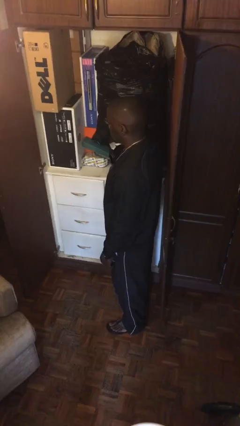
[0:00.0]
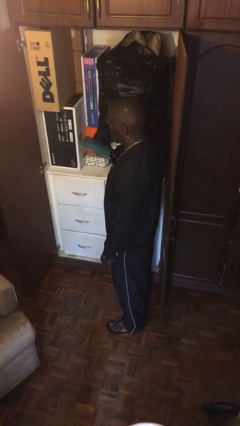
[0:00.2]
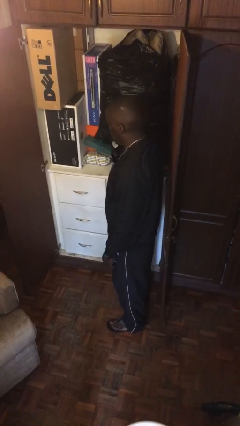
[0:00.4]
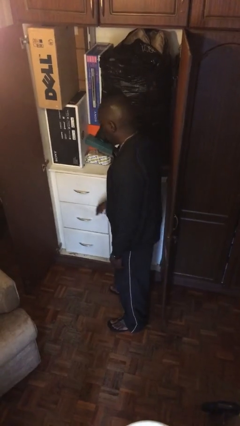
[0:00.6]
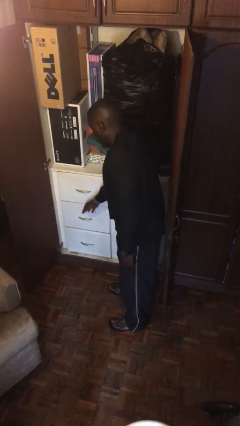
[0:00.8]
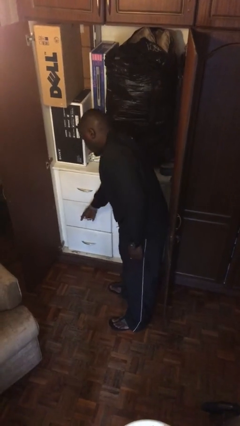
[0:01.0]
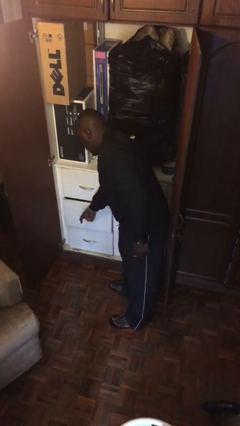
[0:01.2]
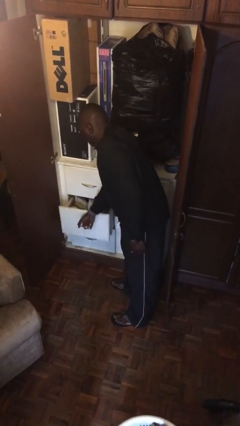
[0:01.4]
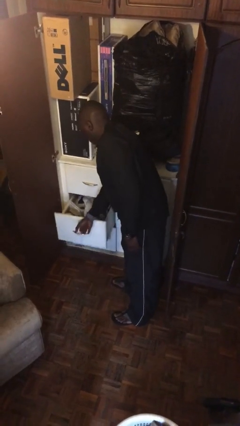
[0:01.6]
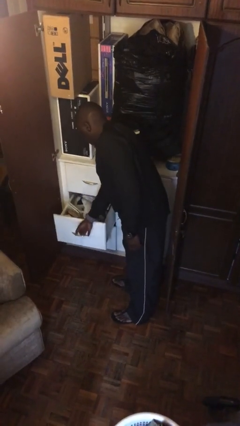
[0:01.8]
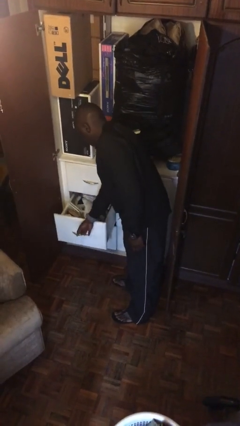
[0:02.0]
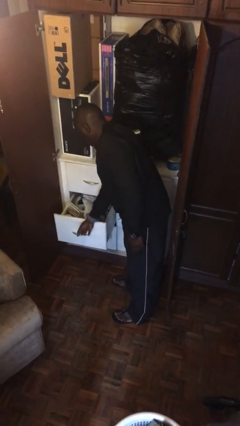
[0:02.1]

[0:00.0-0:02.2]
person opens dresser drawer

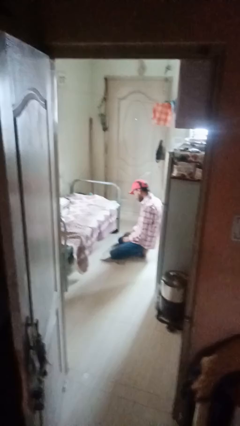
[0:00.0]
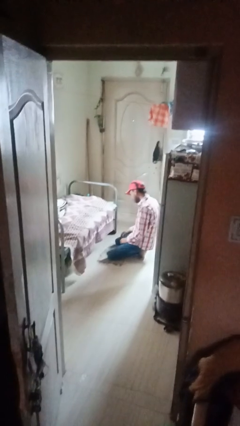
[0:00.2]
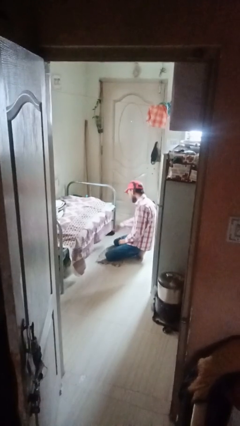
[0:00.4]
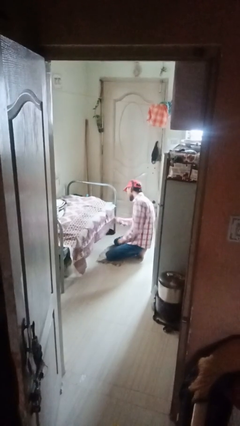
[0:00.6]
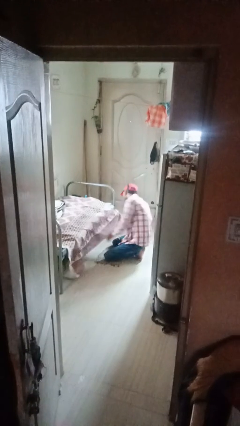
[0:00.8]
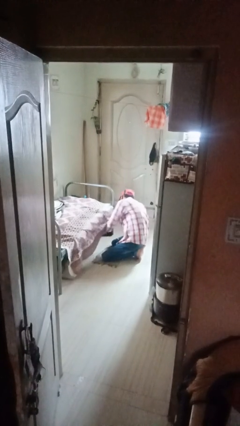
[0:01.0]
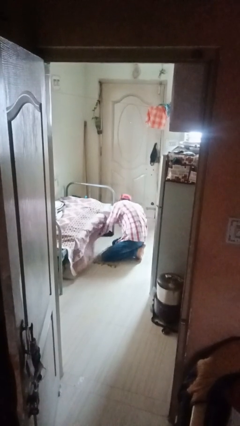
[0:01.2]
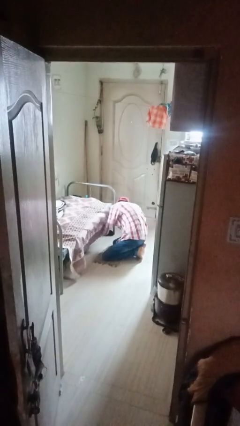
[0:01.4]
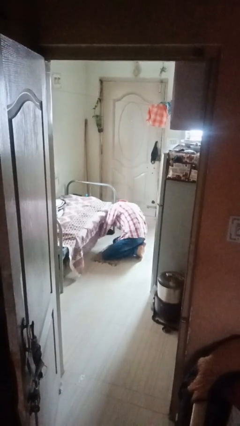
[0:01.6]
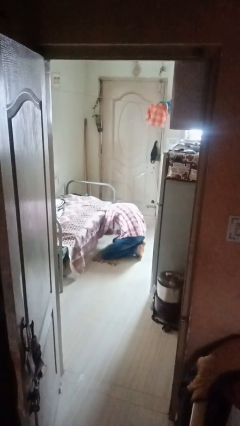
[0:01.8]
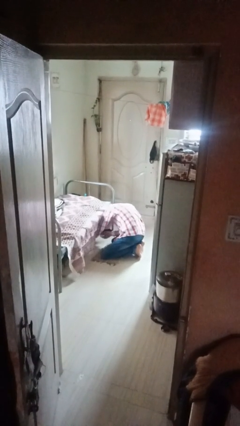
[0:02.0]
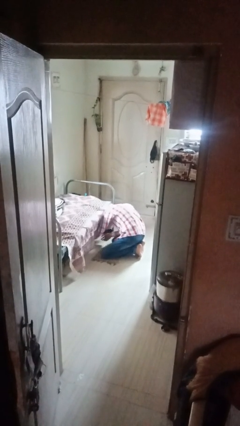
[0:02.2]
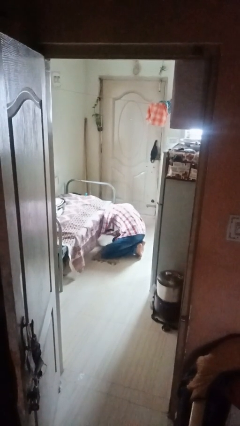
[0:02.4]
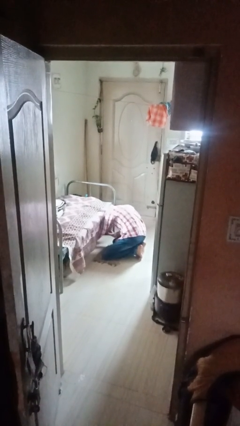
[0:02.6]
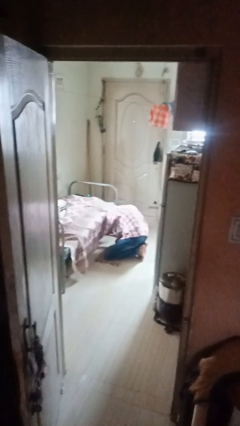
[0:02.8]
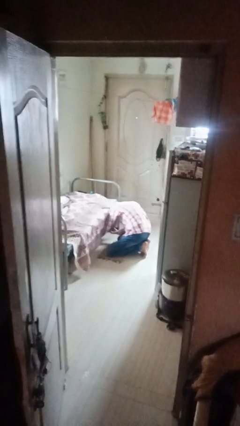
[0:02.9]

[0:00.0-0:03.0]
person searches under bed

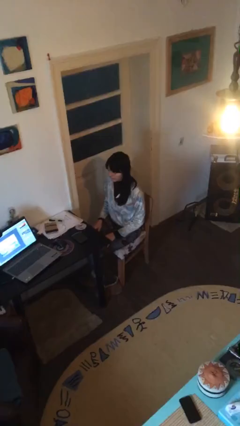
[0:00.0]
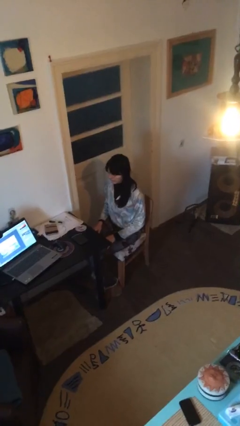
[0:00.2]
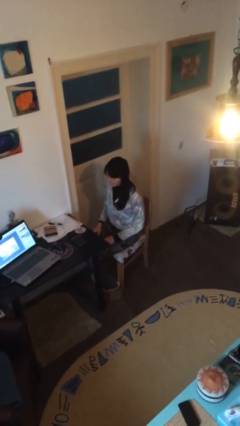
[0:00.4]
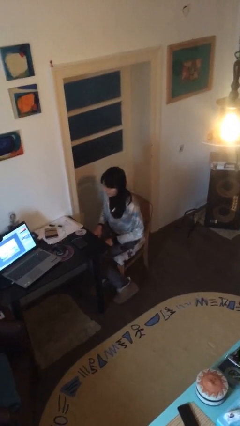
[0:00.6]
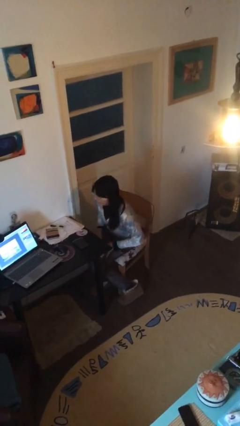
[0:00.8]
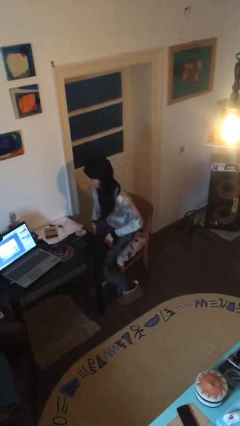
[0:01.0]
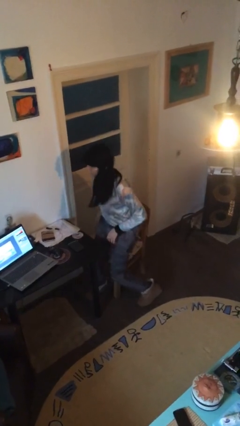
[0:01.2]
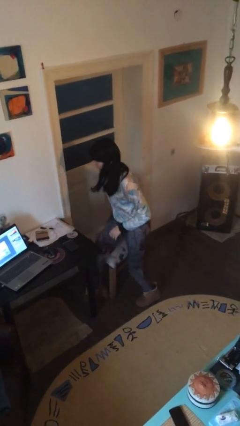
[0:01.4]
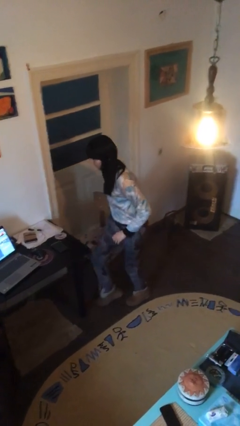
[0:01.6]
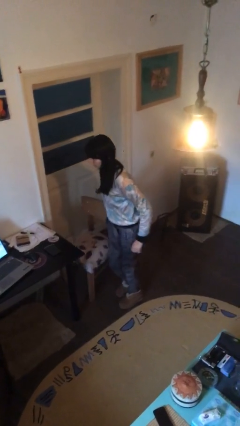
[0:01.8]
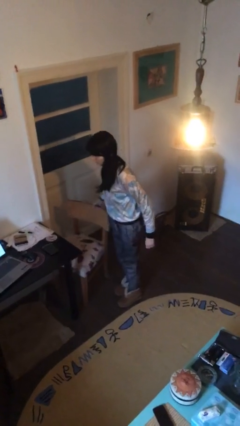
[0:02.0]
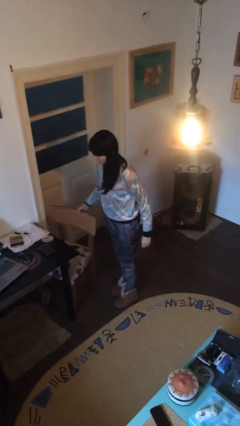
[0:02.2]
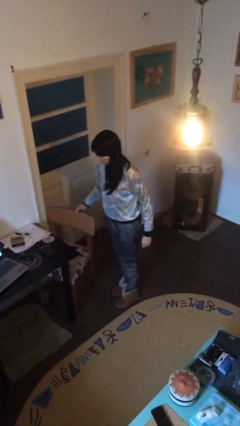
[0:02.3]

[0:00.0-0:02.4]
person stands up

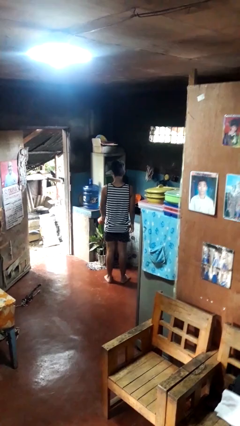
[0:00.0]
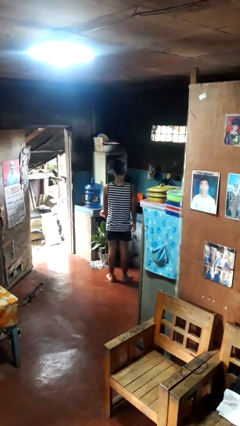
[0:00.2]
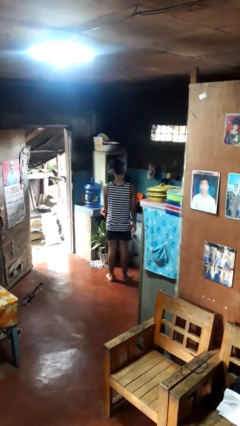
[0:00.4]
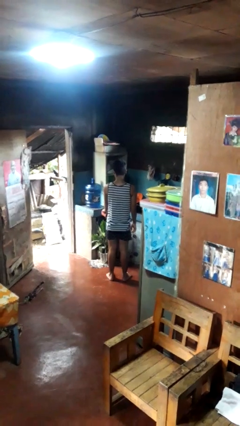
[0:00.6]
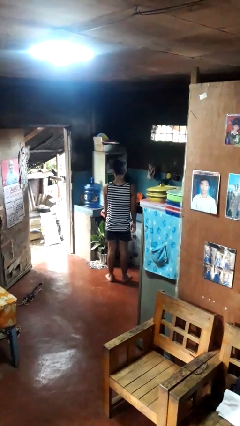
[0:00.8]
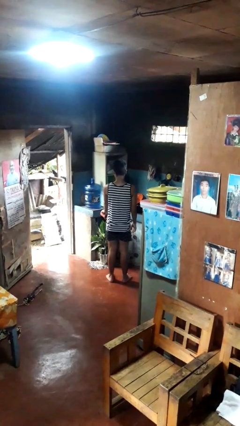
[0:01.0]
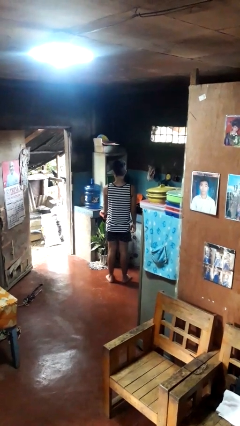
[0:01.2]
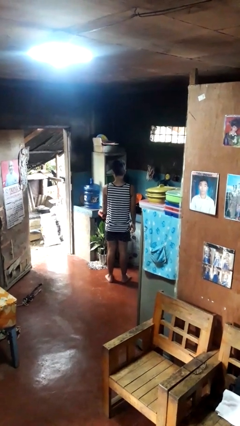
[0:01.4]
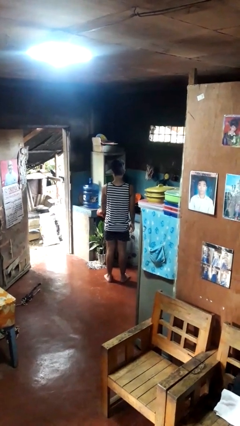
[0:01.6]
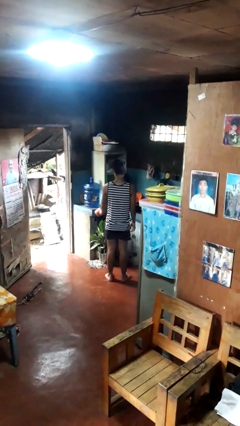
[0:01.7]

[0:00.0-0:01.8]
person waters houseplant

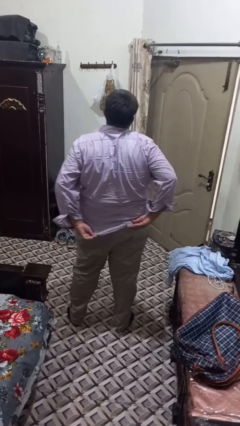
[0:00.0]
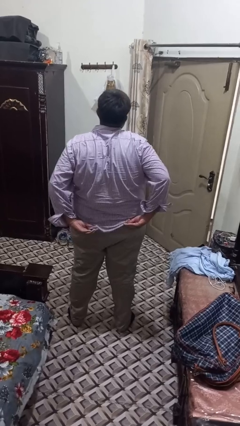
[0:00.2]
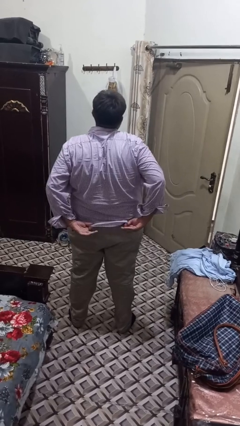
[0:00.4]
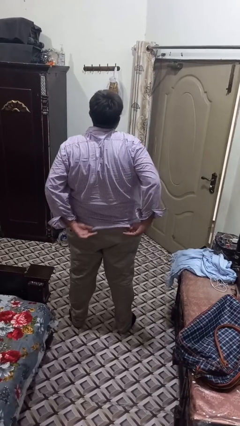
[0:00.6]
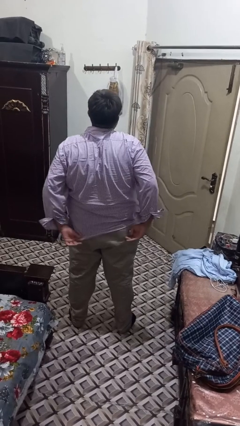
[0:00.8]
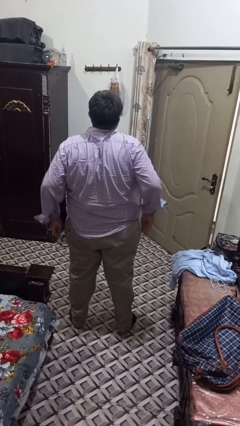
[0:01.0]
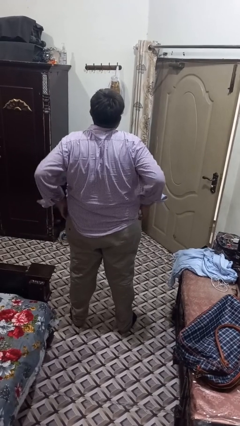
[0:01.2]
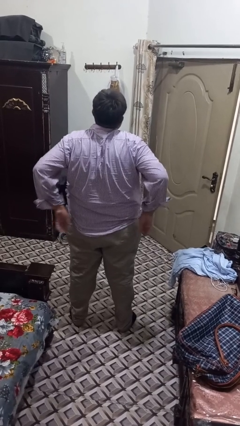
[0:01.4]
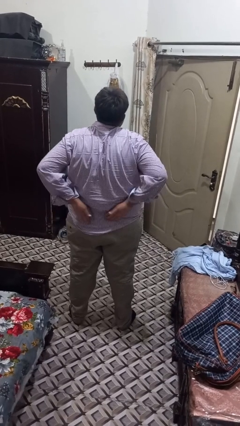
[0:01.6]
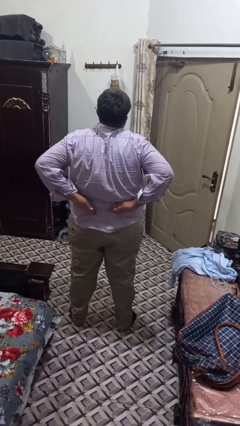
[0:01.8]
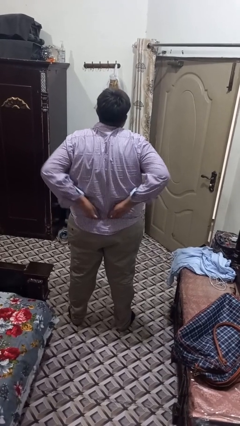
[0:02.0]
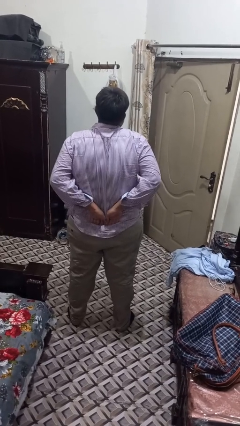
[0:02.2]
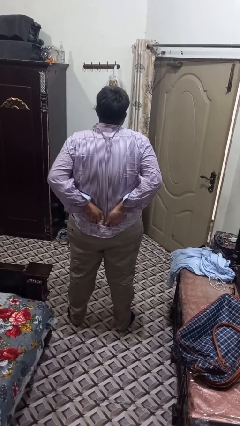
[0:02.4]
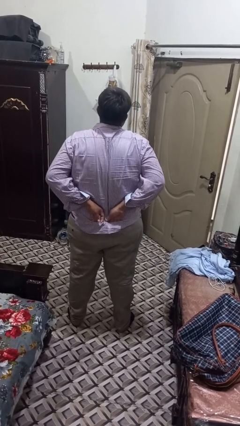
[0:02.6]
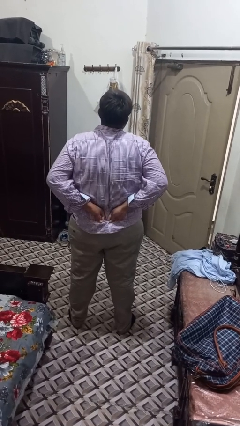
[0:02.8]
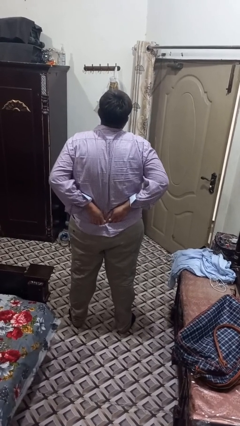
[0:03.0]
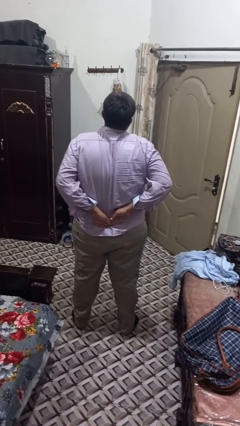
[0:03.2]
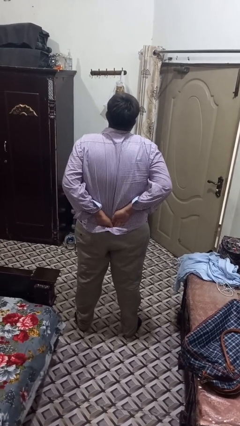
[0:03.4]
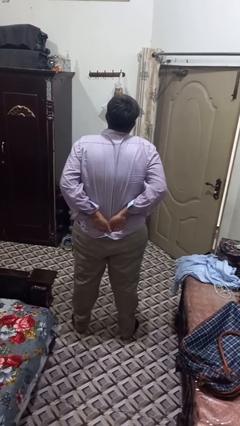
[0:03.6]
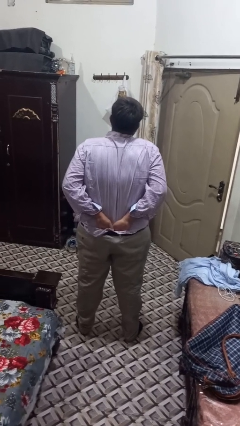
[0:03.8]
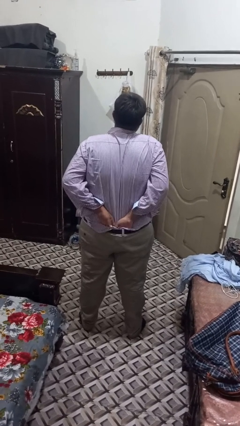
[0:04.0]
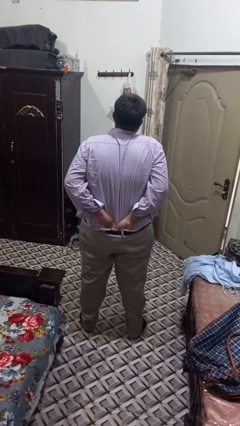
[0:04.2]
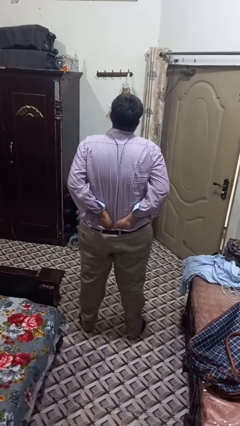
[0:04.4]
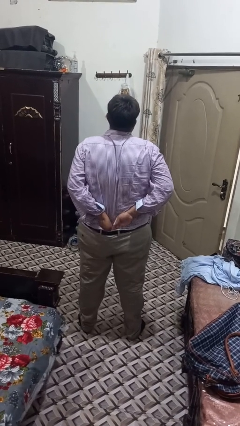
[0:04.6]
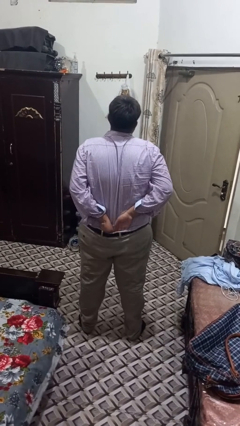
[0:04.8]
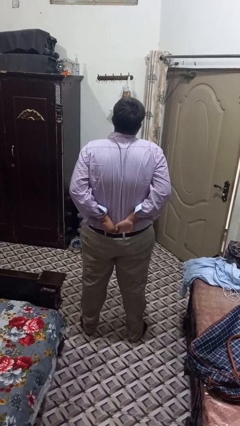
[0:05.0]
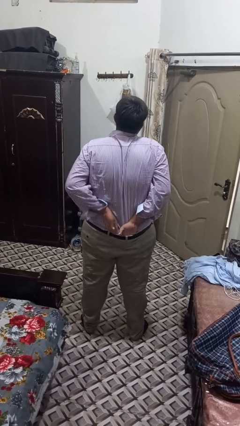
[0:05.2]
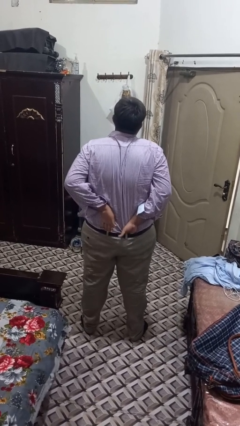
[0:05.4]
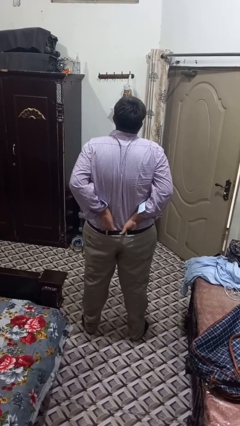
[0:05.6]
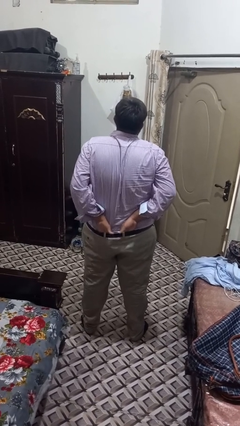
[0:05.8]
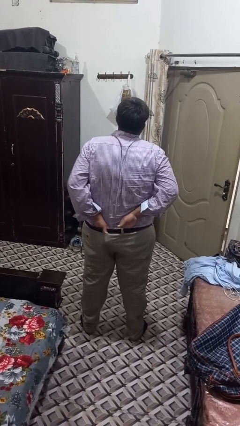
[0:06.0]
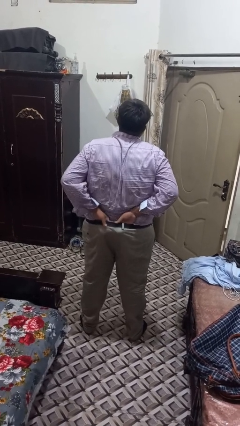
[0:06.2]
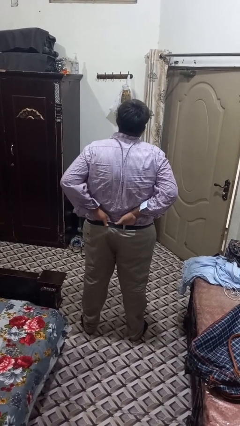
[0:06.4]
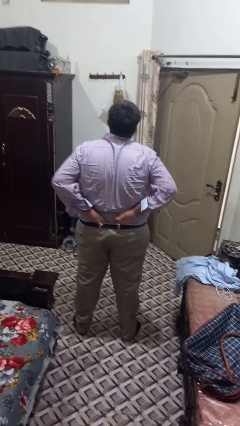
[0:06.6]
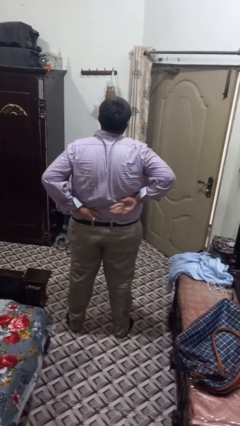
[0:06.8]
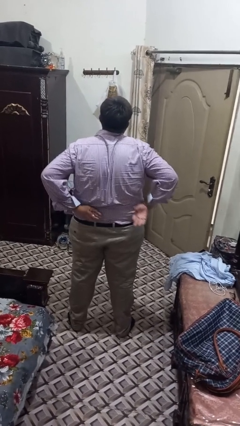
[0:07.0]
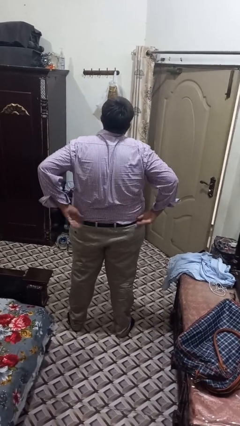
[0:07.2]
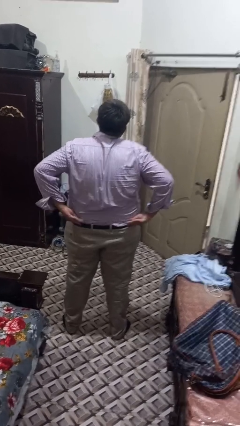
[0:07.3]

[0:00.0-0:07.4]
person tucks in shirt

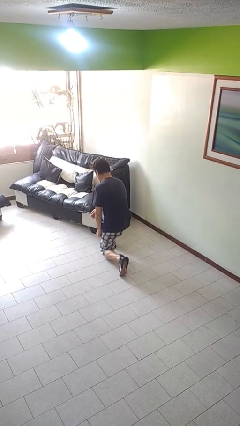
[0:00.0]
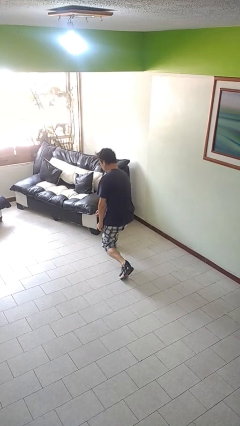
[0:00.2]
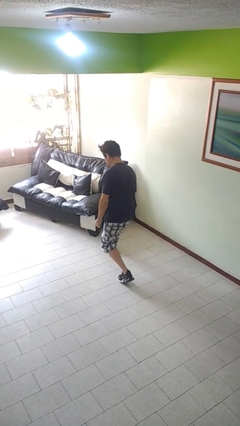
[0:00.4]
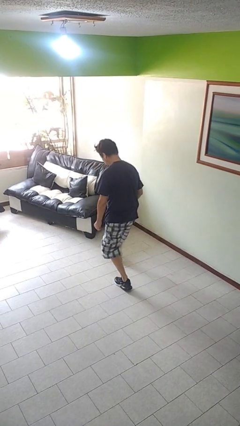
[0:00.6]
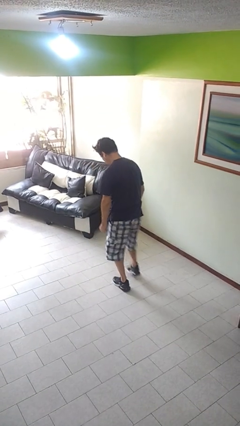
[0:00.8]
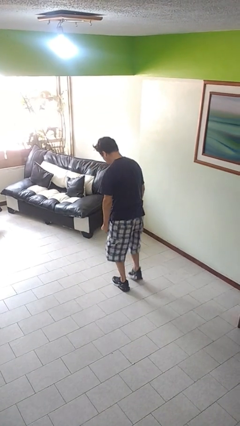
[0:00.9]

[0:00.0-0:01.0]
person stands up from floor
